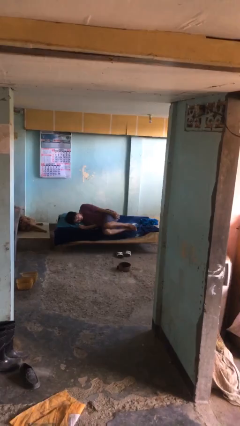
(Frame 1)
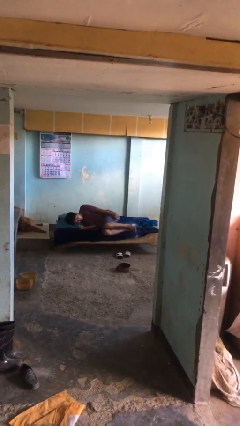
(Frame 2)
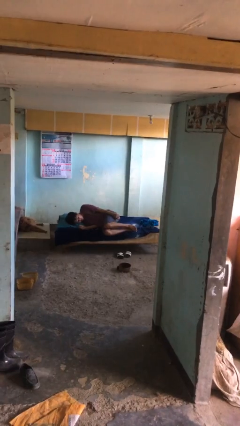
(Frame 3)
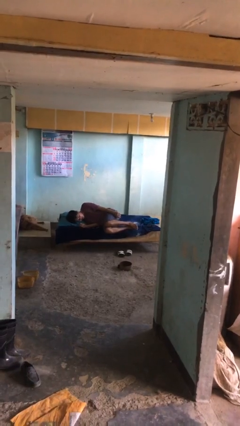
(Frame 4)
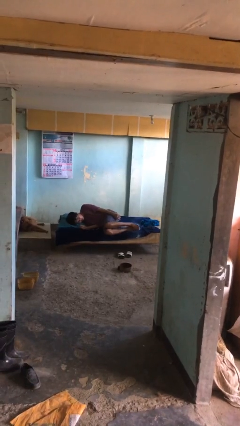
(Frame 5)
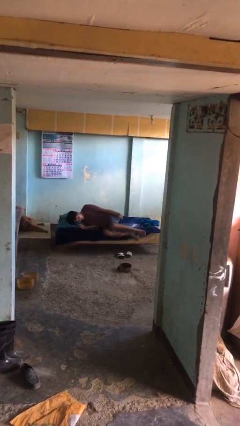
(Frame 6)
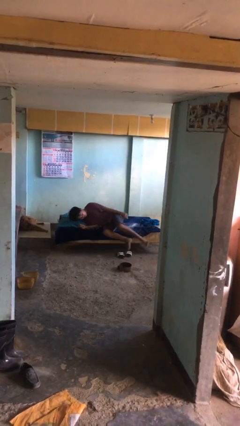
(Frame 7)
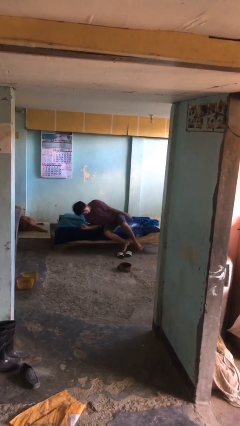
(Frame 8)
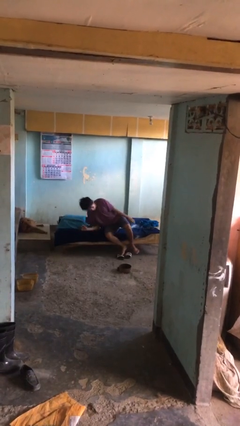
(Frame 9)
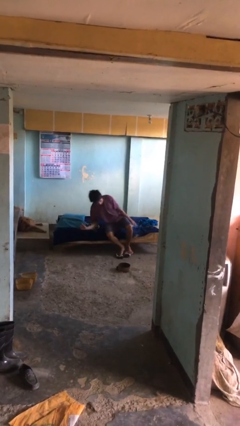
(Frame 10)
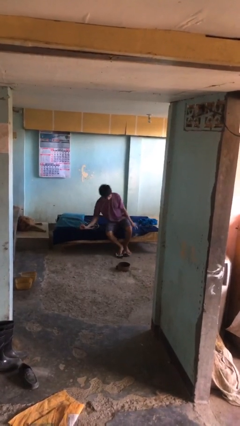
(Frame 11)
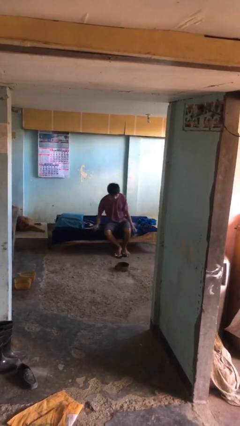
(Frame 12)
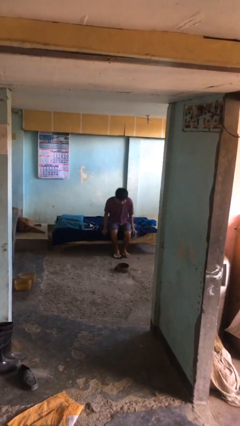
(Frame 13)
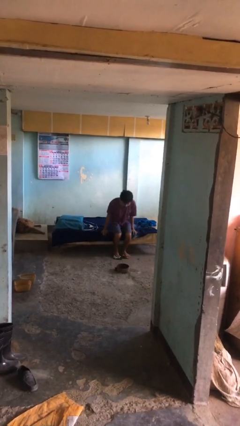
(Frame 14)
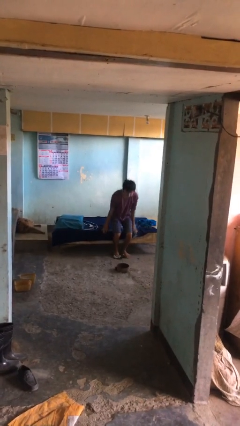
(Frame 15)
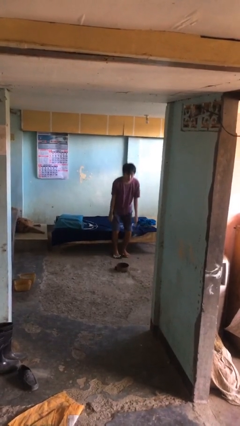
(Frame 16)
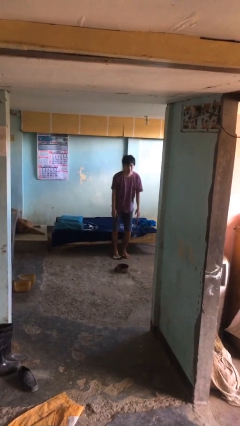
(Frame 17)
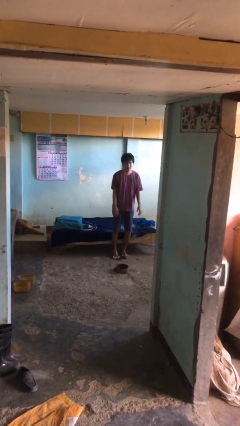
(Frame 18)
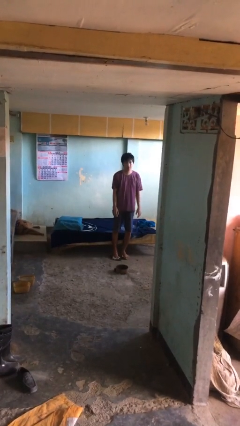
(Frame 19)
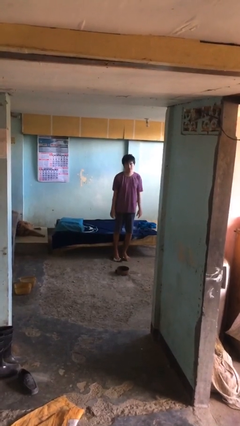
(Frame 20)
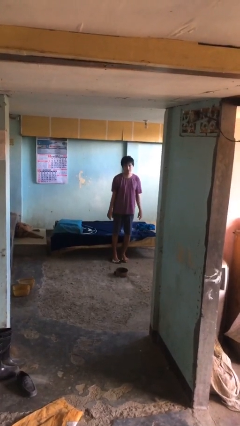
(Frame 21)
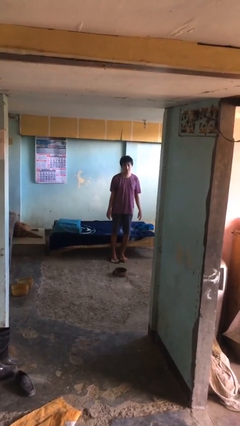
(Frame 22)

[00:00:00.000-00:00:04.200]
person stands up

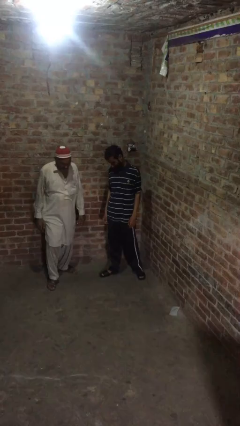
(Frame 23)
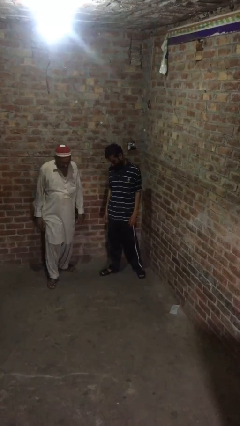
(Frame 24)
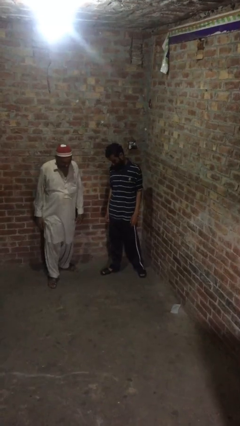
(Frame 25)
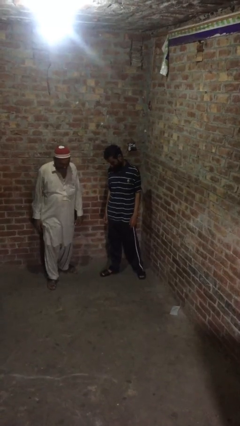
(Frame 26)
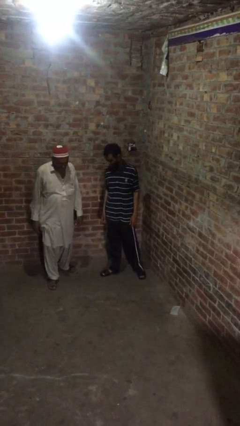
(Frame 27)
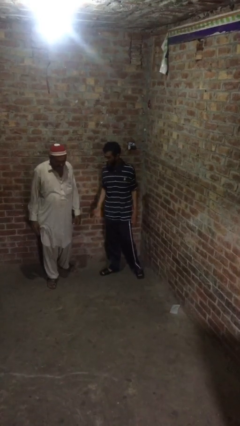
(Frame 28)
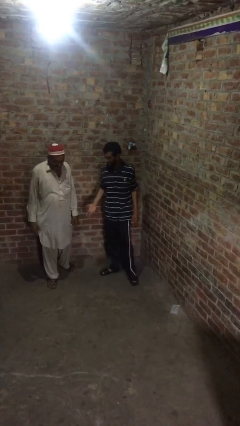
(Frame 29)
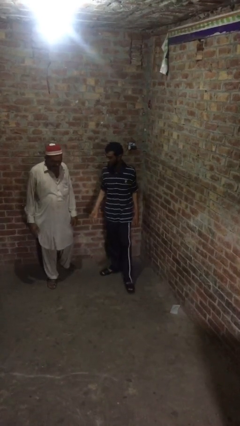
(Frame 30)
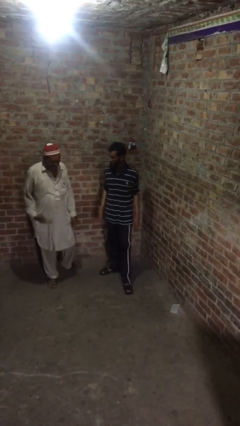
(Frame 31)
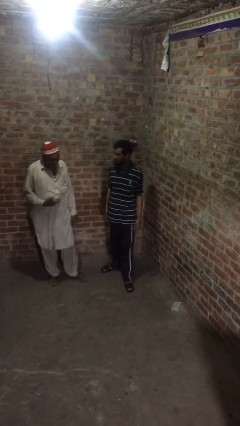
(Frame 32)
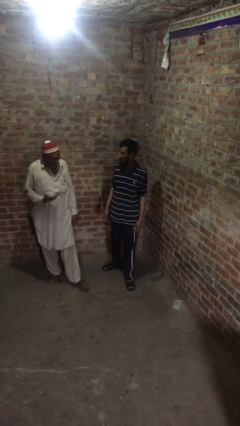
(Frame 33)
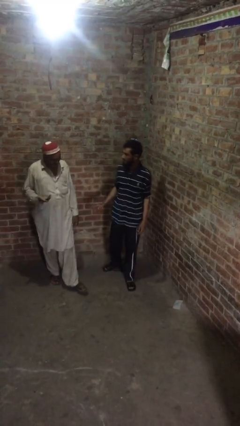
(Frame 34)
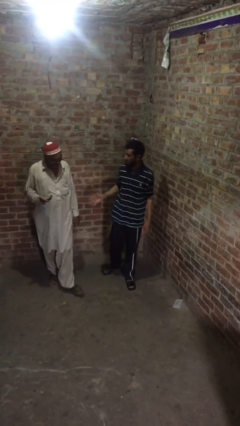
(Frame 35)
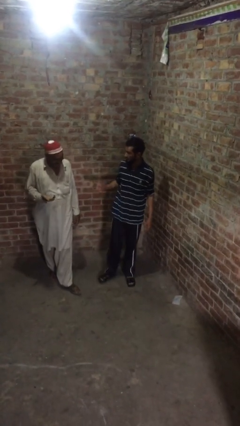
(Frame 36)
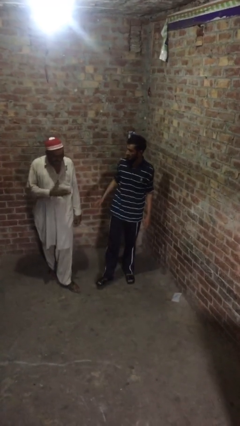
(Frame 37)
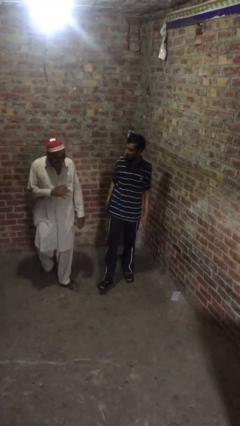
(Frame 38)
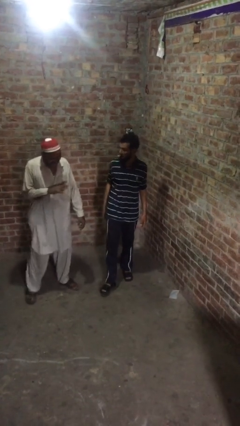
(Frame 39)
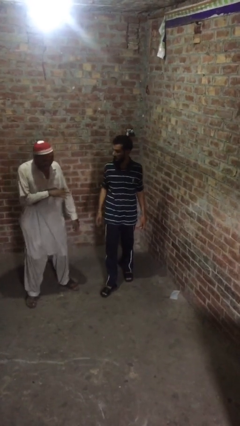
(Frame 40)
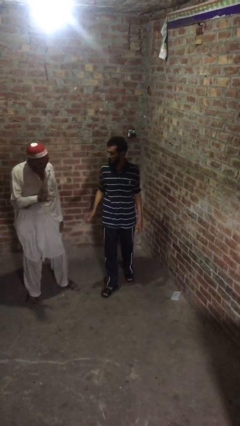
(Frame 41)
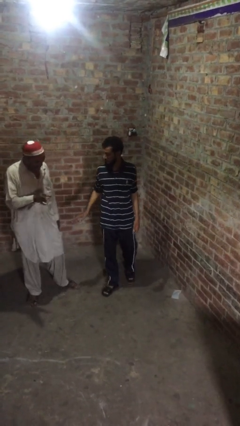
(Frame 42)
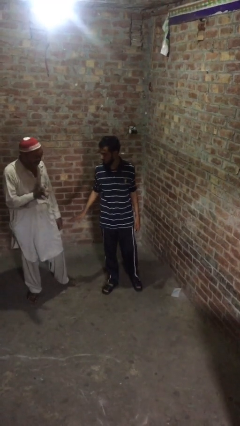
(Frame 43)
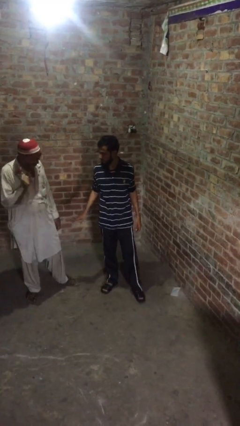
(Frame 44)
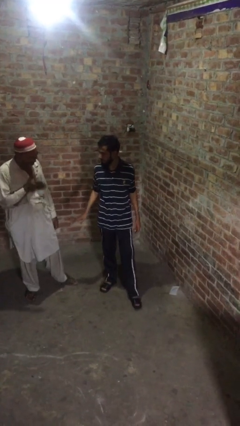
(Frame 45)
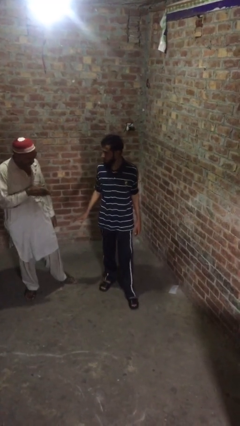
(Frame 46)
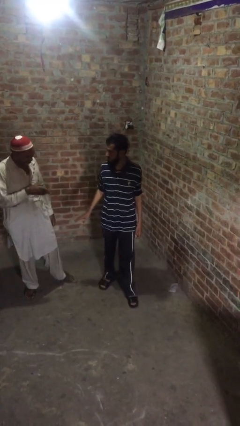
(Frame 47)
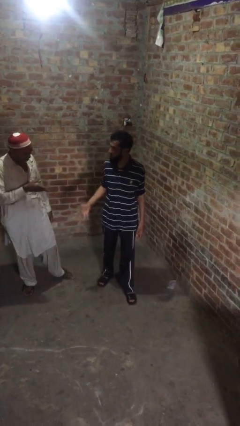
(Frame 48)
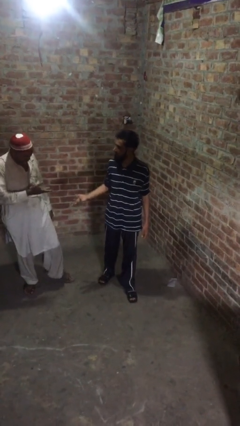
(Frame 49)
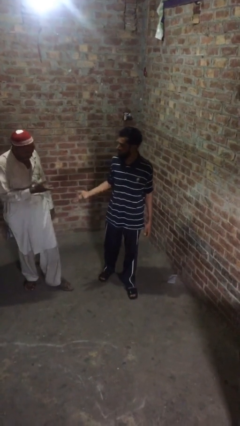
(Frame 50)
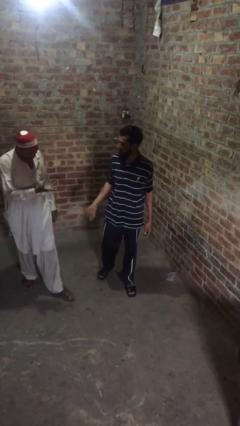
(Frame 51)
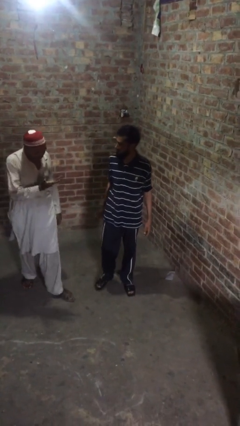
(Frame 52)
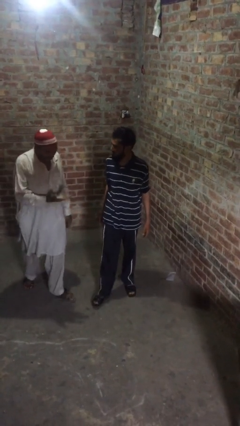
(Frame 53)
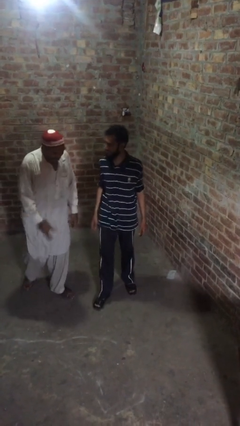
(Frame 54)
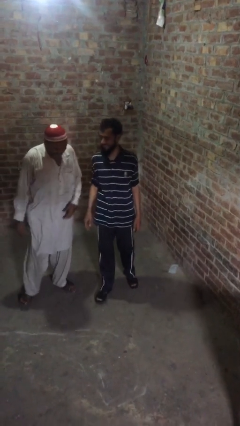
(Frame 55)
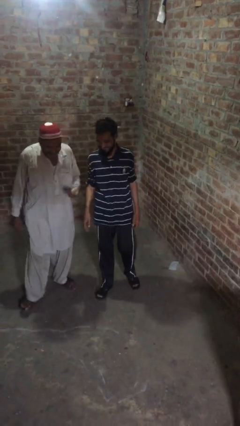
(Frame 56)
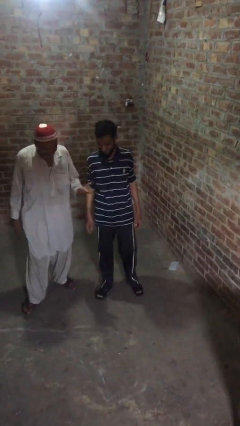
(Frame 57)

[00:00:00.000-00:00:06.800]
person talks to person

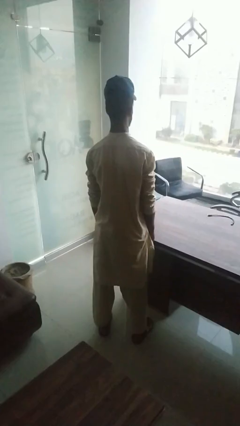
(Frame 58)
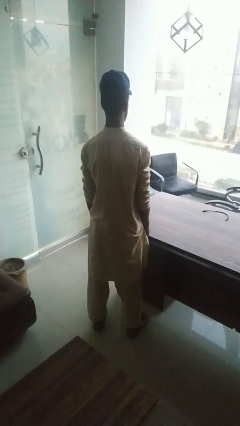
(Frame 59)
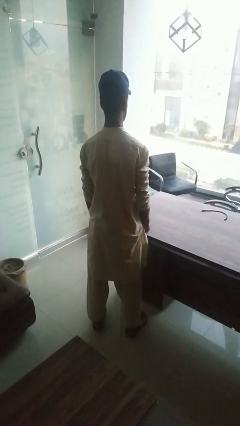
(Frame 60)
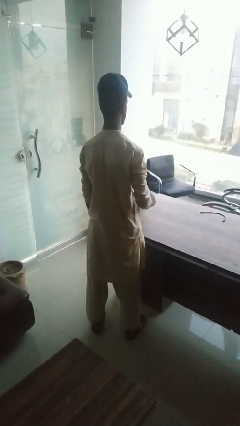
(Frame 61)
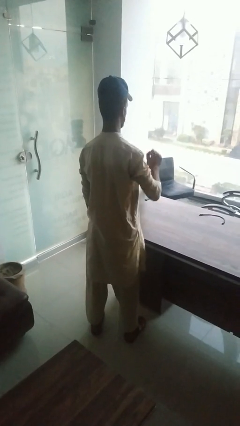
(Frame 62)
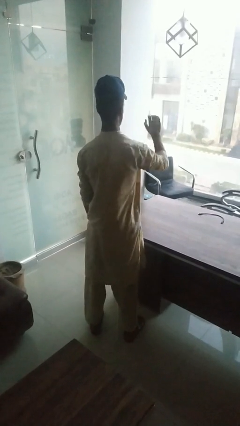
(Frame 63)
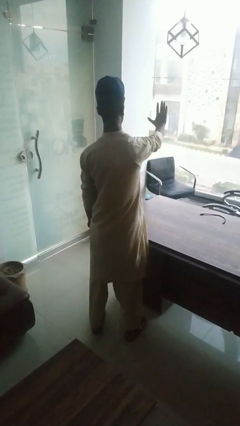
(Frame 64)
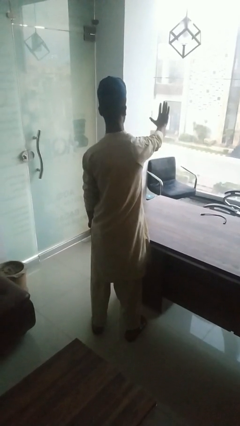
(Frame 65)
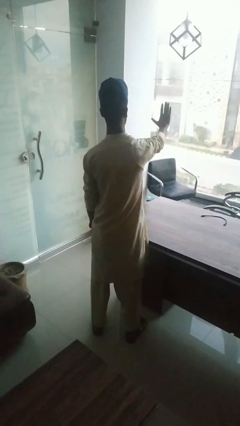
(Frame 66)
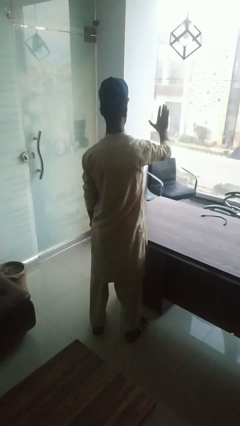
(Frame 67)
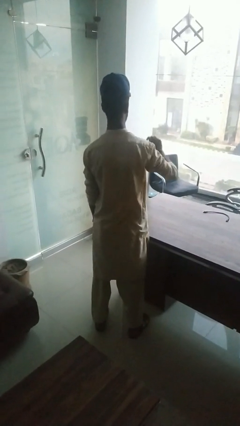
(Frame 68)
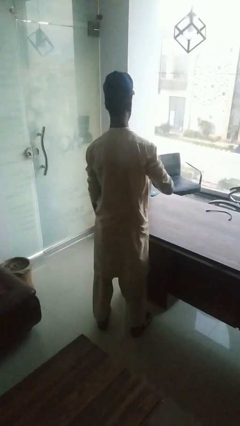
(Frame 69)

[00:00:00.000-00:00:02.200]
person gestures stop

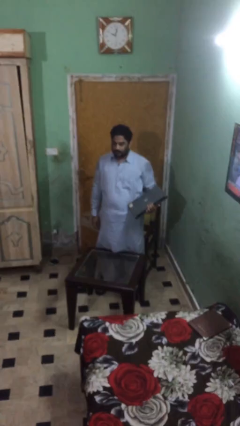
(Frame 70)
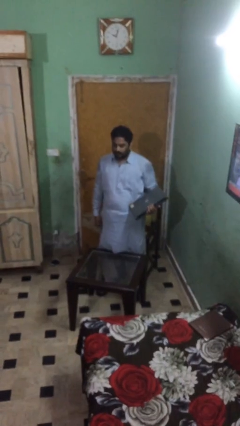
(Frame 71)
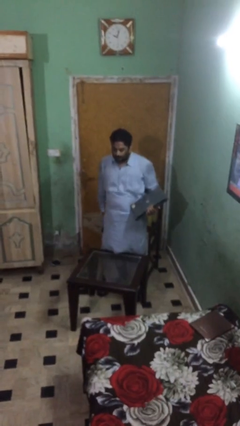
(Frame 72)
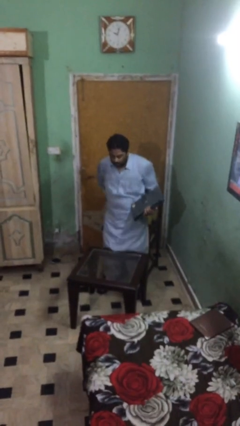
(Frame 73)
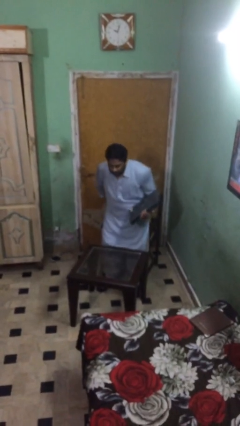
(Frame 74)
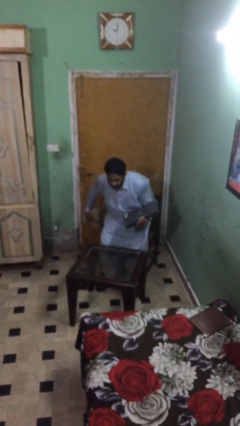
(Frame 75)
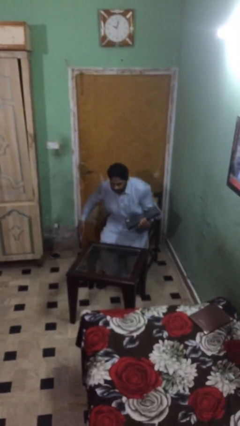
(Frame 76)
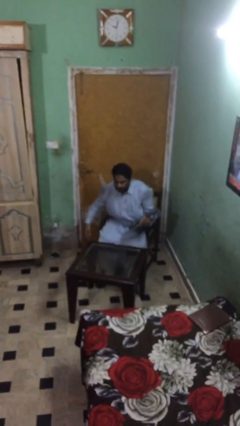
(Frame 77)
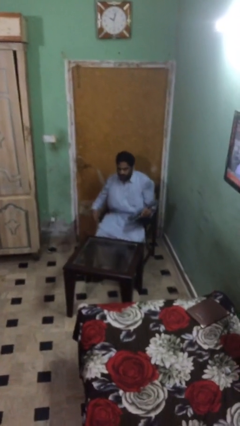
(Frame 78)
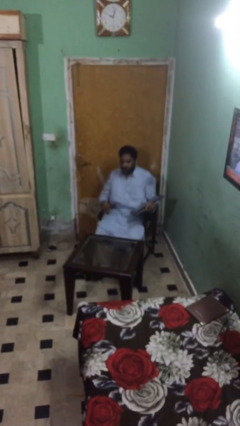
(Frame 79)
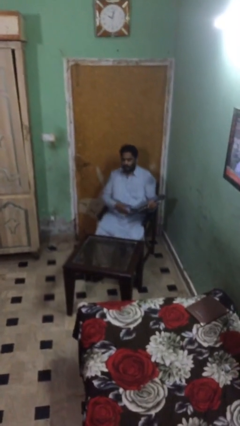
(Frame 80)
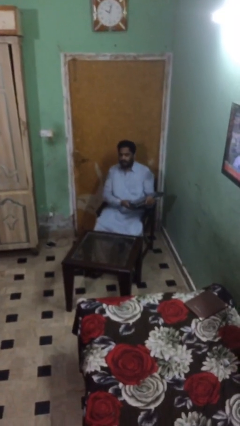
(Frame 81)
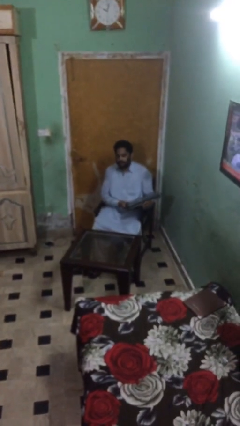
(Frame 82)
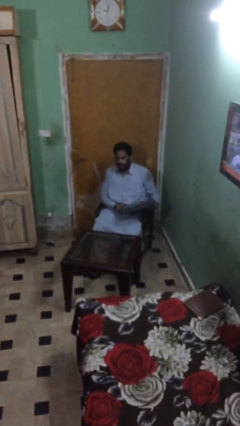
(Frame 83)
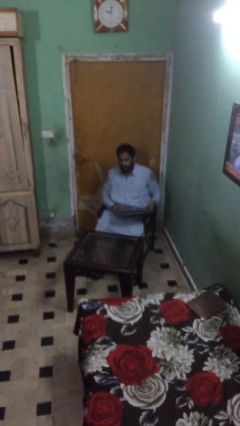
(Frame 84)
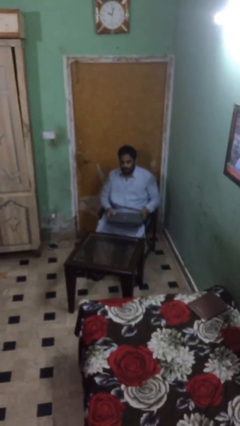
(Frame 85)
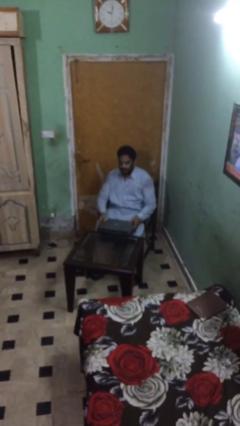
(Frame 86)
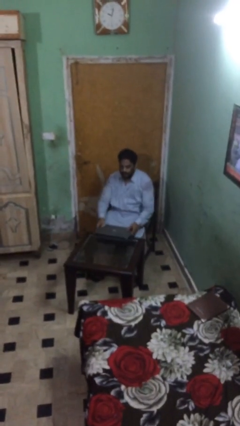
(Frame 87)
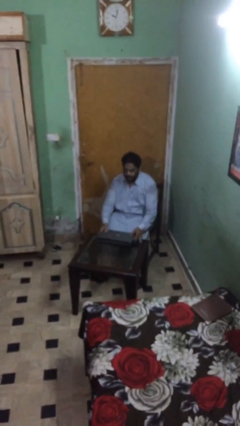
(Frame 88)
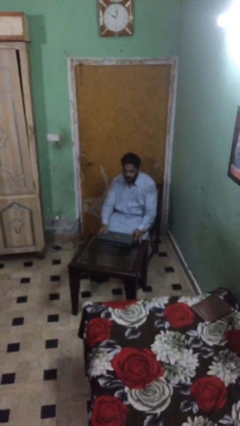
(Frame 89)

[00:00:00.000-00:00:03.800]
person sits down

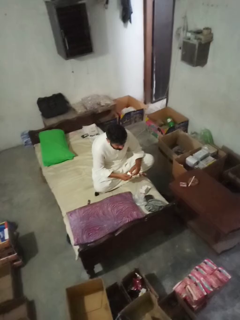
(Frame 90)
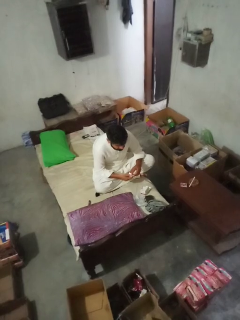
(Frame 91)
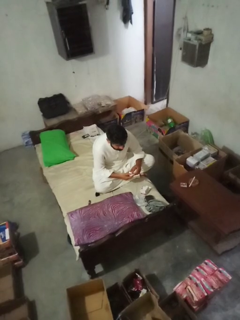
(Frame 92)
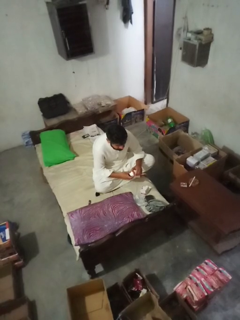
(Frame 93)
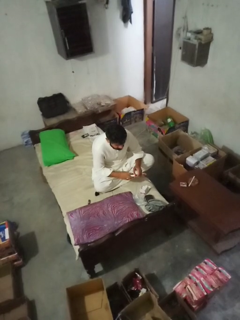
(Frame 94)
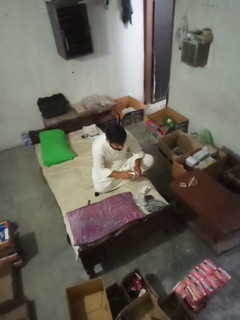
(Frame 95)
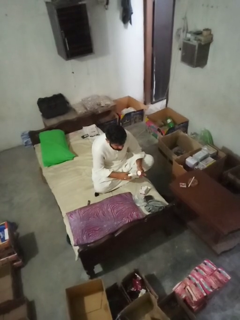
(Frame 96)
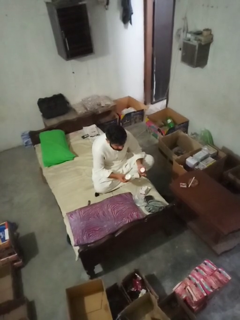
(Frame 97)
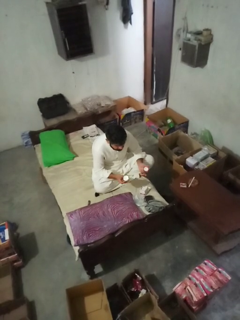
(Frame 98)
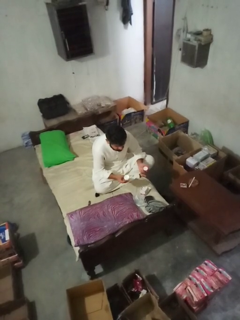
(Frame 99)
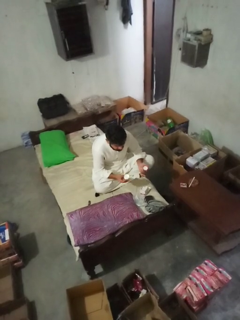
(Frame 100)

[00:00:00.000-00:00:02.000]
person opens jar
